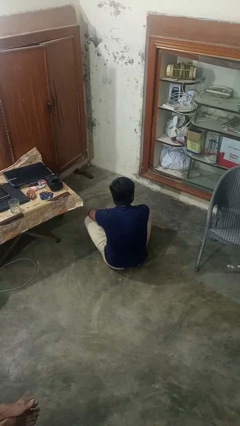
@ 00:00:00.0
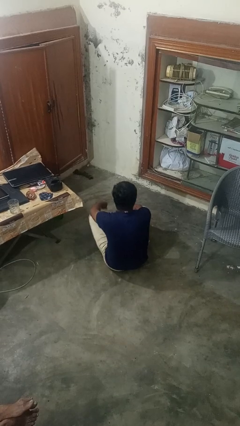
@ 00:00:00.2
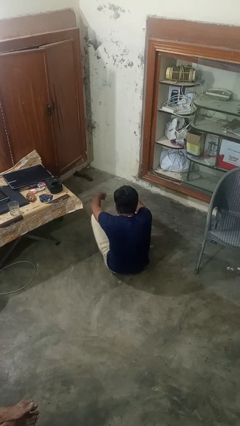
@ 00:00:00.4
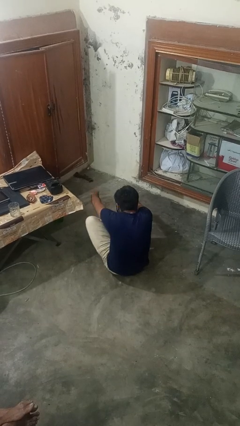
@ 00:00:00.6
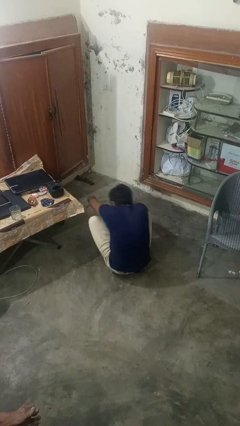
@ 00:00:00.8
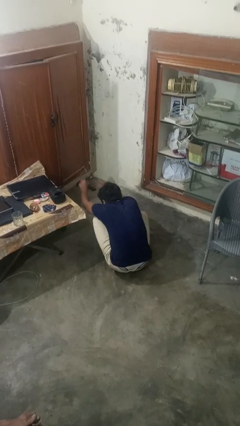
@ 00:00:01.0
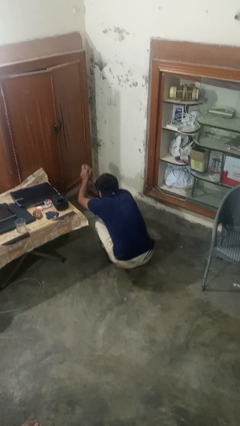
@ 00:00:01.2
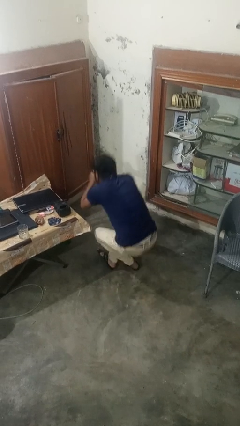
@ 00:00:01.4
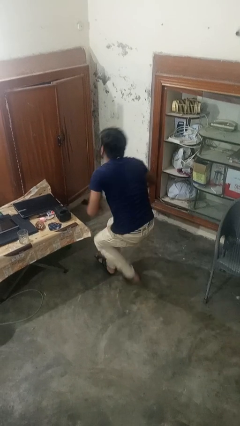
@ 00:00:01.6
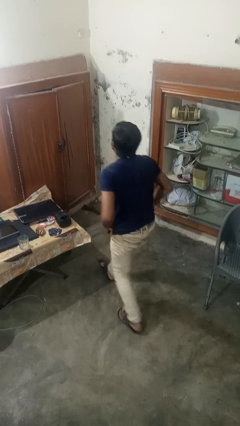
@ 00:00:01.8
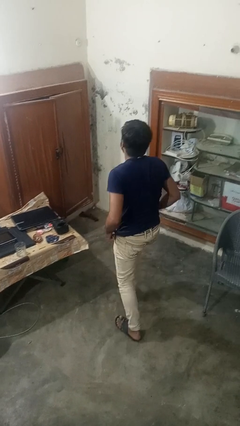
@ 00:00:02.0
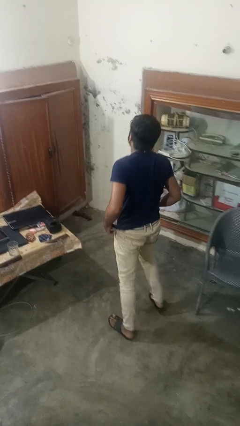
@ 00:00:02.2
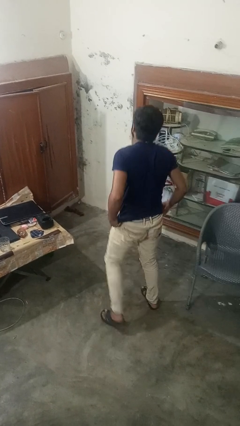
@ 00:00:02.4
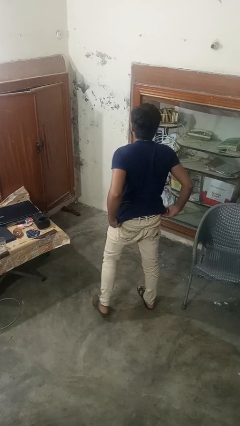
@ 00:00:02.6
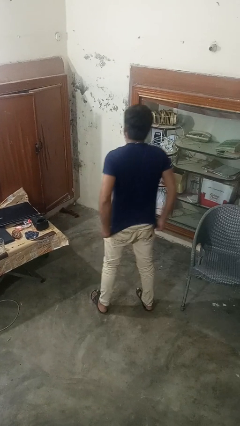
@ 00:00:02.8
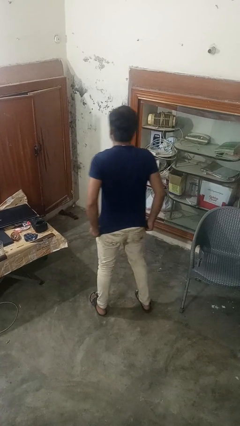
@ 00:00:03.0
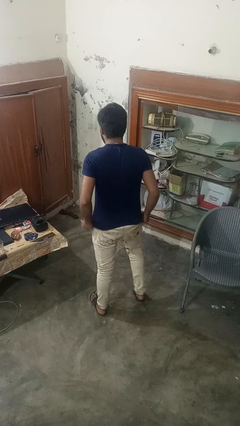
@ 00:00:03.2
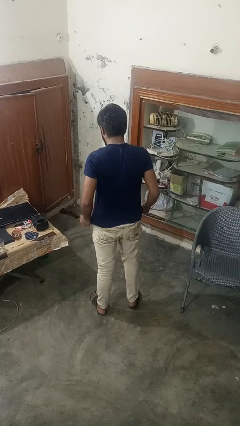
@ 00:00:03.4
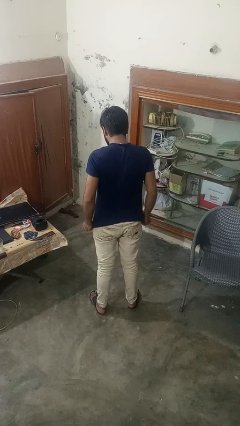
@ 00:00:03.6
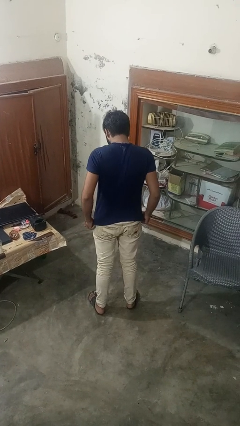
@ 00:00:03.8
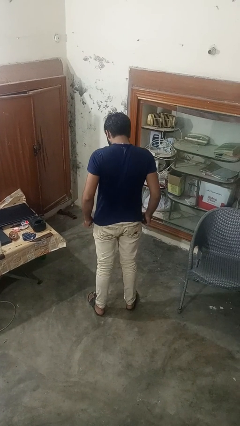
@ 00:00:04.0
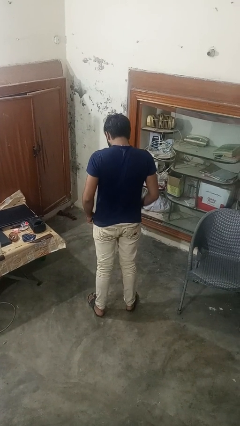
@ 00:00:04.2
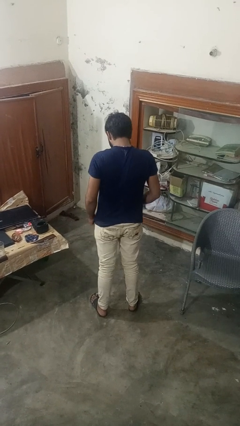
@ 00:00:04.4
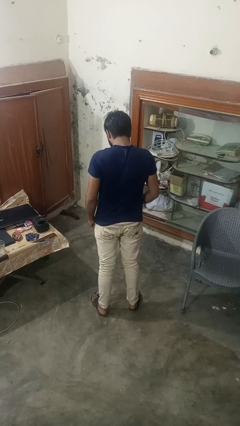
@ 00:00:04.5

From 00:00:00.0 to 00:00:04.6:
person stands up from floor

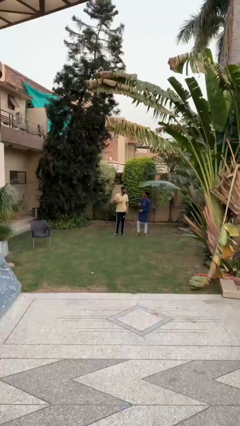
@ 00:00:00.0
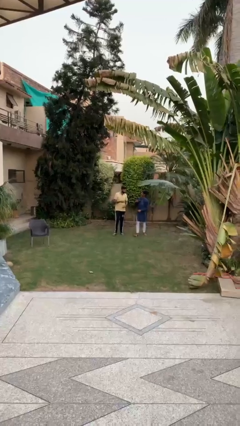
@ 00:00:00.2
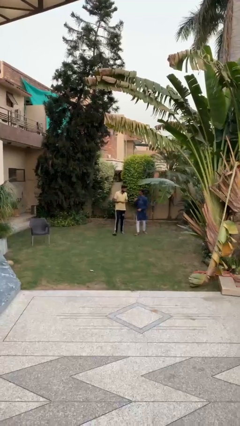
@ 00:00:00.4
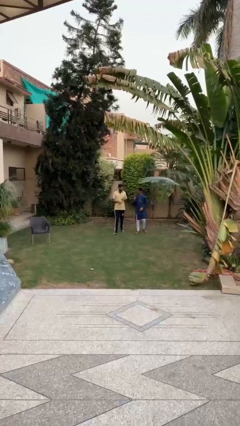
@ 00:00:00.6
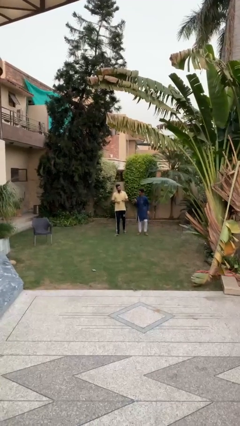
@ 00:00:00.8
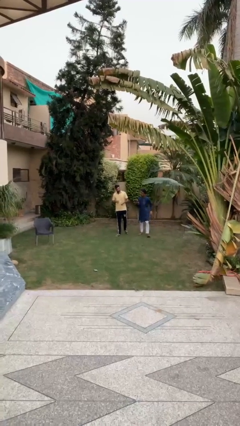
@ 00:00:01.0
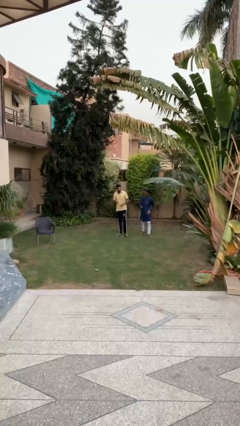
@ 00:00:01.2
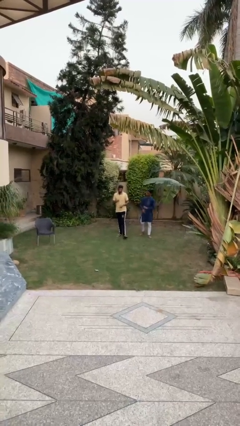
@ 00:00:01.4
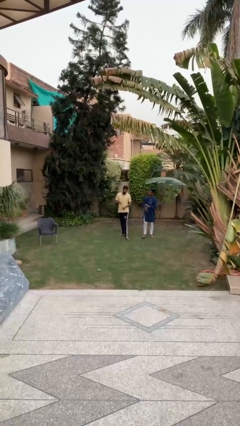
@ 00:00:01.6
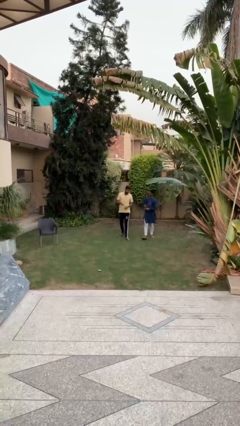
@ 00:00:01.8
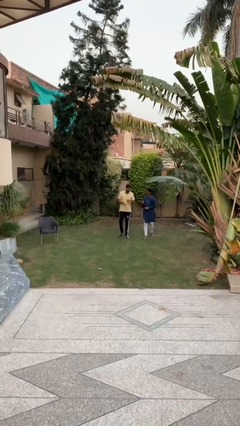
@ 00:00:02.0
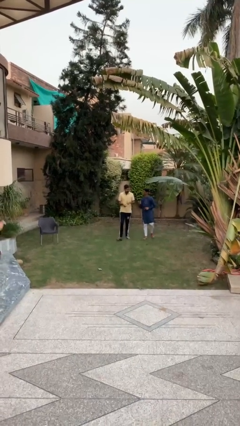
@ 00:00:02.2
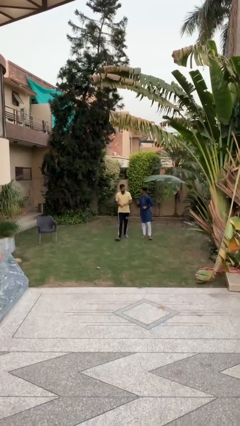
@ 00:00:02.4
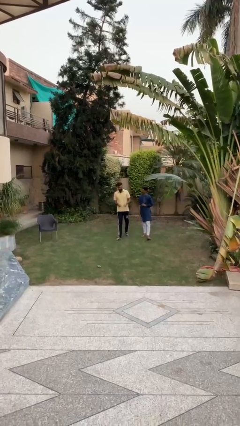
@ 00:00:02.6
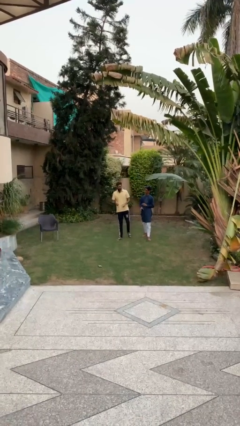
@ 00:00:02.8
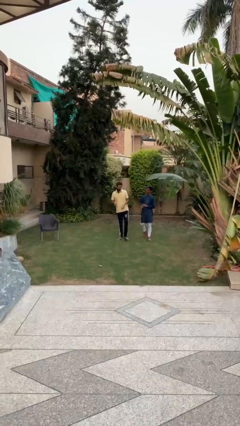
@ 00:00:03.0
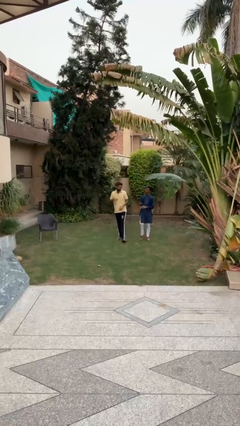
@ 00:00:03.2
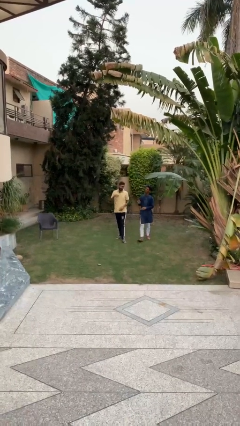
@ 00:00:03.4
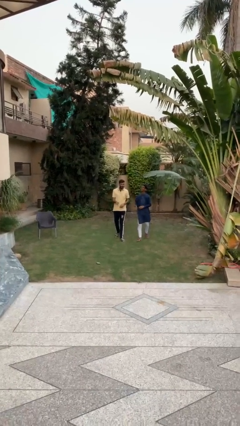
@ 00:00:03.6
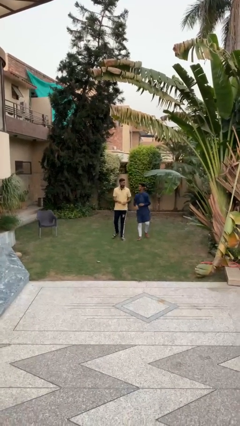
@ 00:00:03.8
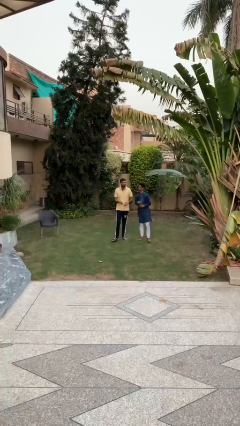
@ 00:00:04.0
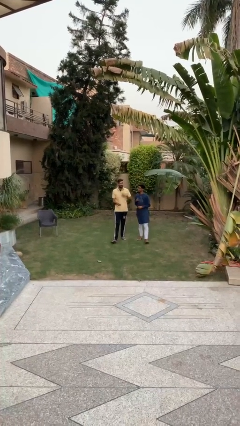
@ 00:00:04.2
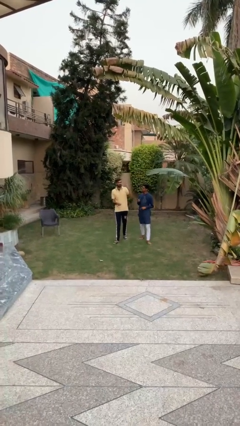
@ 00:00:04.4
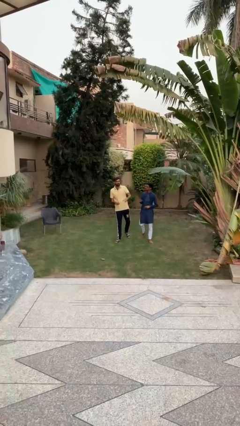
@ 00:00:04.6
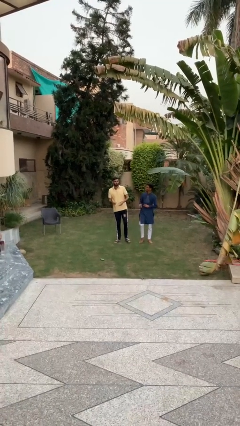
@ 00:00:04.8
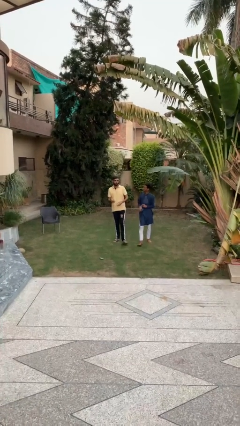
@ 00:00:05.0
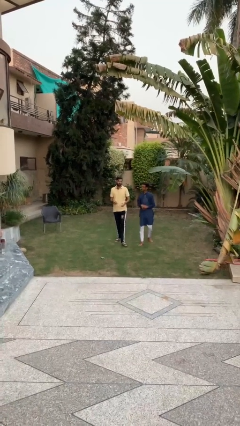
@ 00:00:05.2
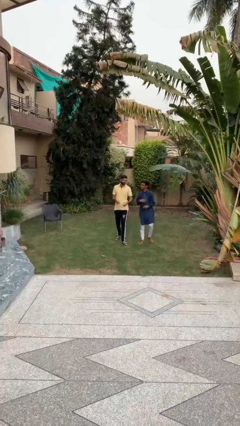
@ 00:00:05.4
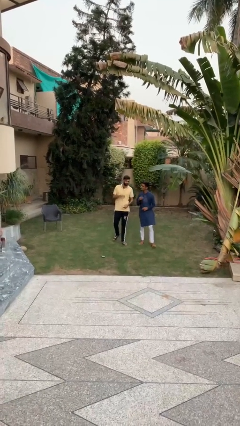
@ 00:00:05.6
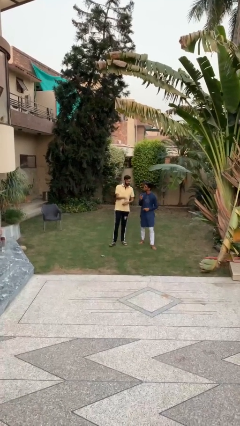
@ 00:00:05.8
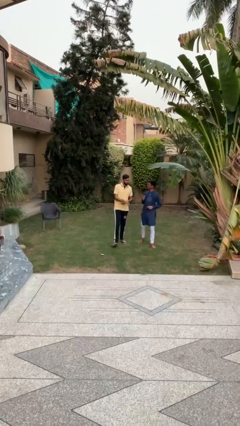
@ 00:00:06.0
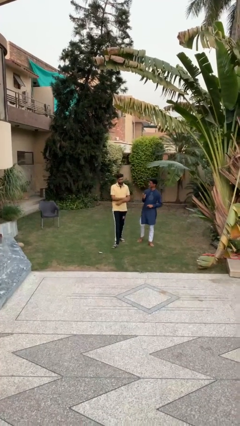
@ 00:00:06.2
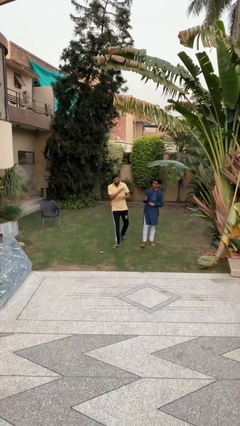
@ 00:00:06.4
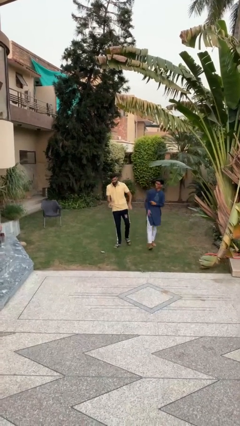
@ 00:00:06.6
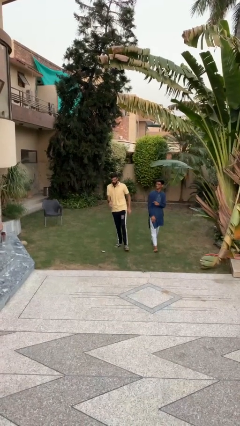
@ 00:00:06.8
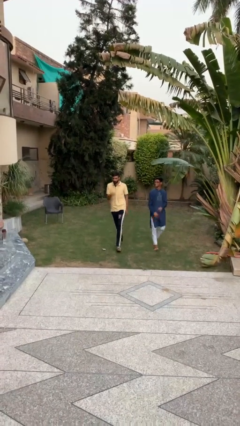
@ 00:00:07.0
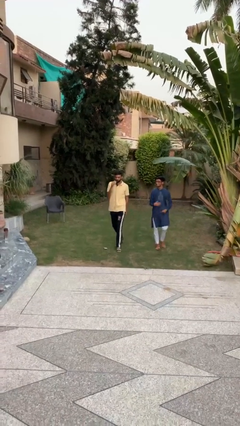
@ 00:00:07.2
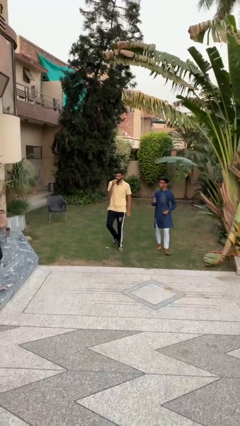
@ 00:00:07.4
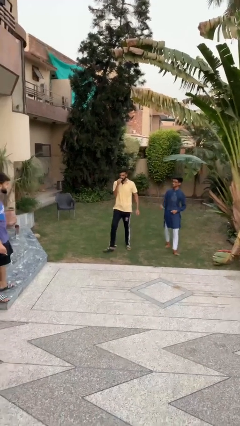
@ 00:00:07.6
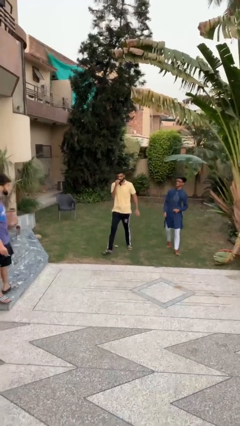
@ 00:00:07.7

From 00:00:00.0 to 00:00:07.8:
person talks to person

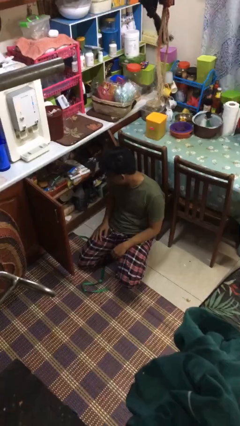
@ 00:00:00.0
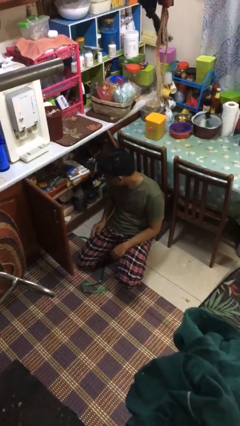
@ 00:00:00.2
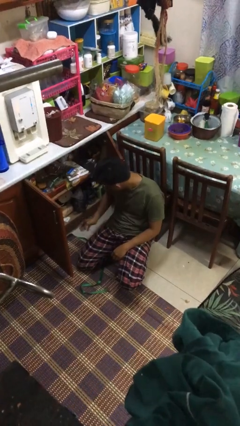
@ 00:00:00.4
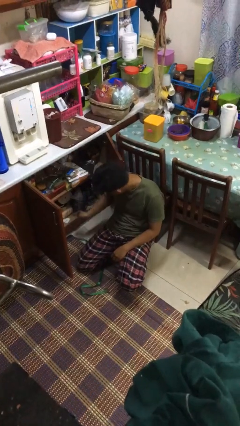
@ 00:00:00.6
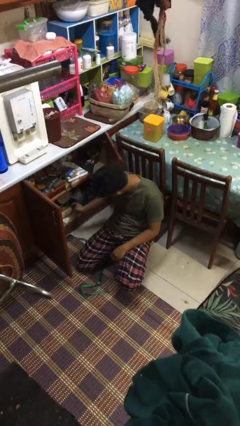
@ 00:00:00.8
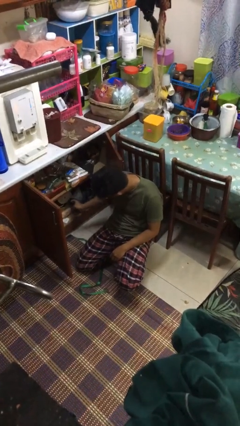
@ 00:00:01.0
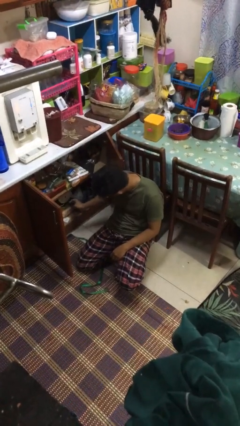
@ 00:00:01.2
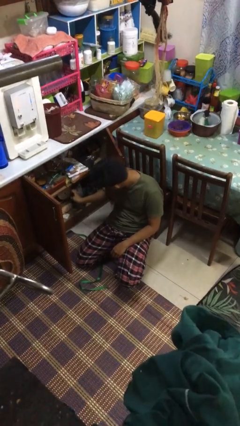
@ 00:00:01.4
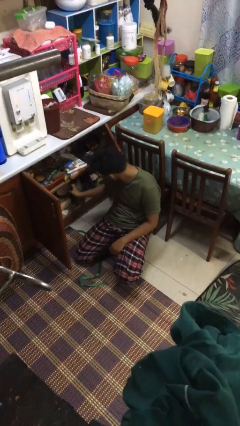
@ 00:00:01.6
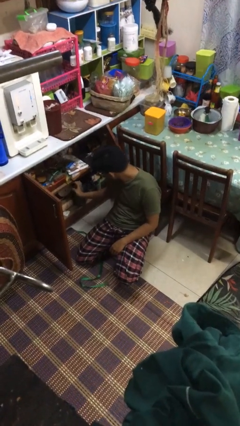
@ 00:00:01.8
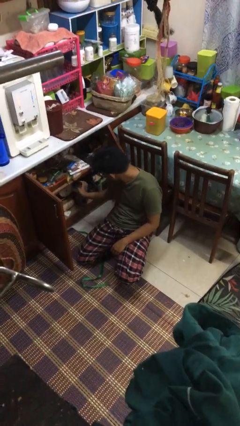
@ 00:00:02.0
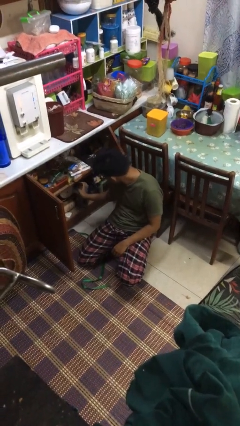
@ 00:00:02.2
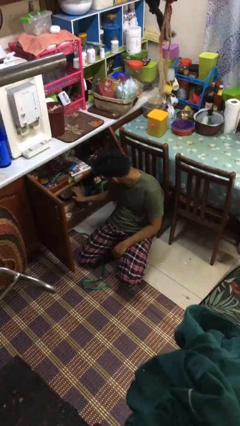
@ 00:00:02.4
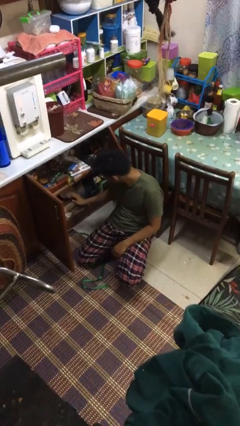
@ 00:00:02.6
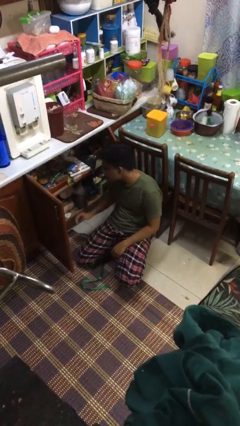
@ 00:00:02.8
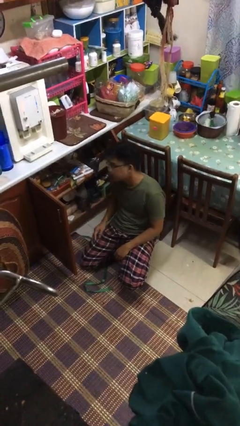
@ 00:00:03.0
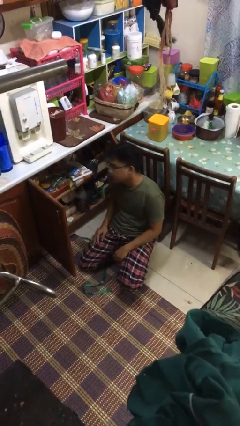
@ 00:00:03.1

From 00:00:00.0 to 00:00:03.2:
person searches in kitchen drawer

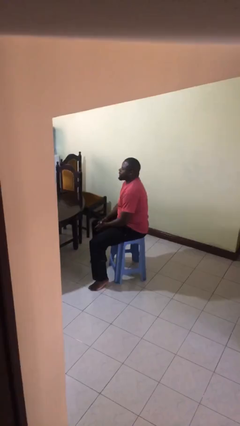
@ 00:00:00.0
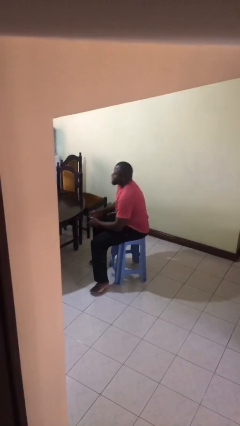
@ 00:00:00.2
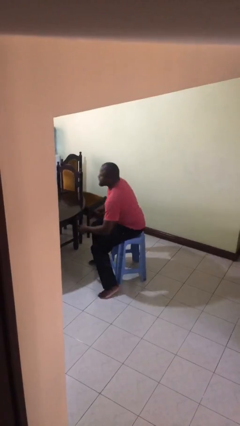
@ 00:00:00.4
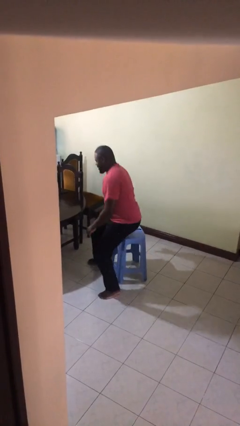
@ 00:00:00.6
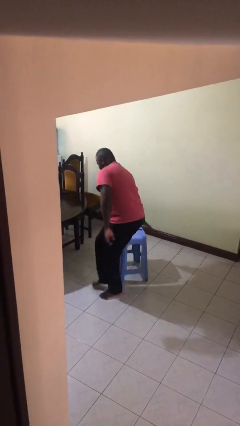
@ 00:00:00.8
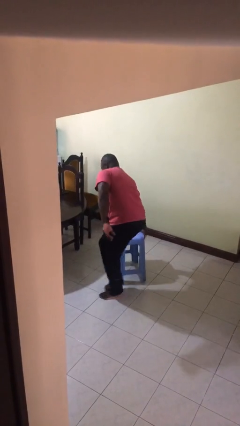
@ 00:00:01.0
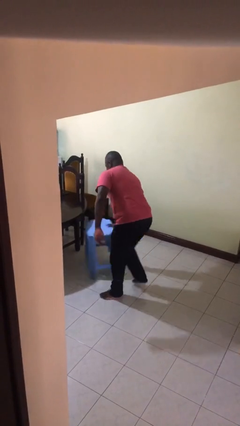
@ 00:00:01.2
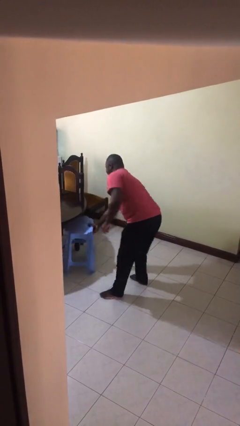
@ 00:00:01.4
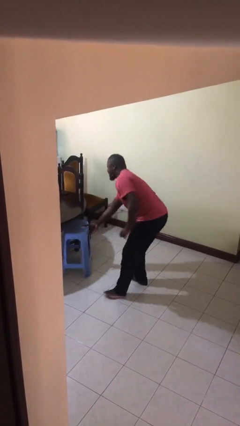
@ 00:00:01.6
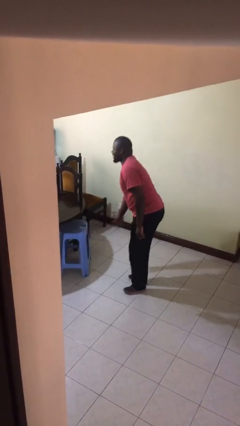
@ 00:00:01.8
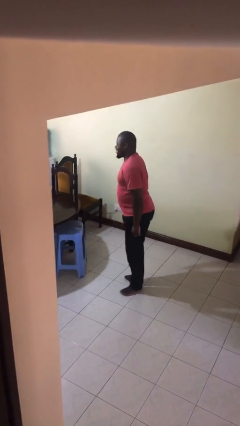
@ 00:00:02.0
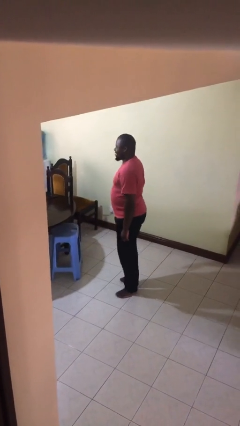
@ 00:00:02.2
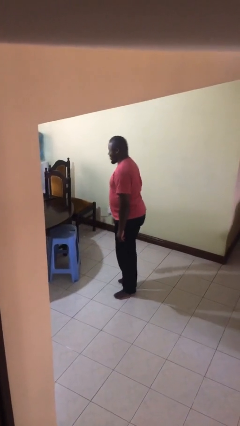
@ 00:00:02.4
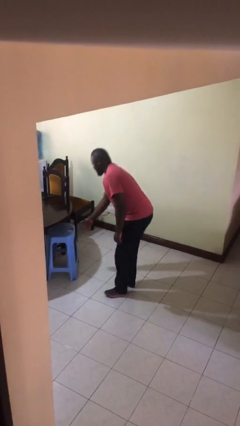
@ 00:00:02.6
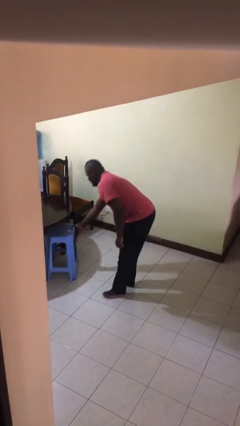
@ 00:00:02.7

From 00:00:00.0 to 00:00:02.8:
person stands up
